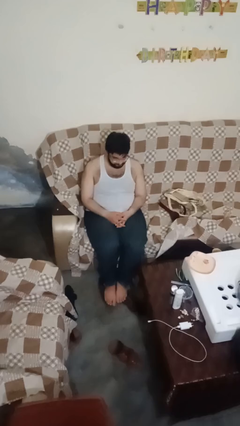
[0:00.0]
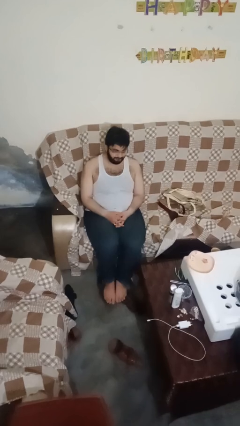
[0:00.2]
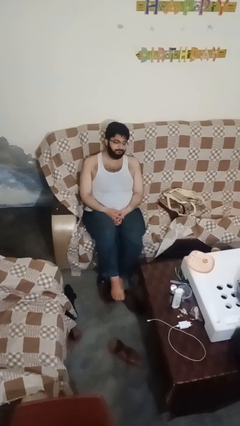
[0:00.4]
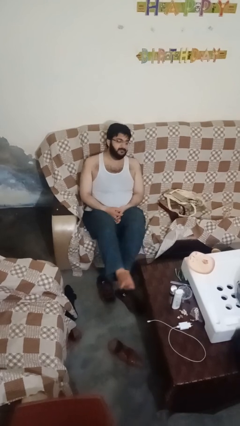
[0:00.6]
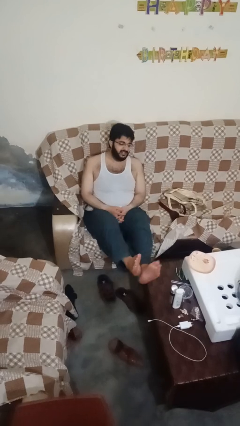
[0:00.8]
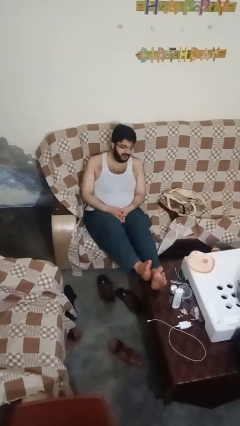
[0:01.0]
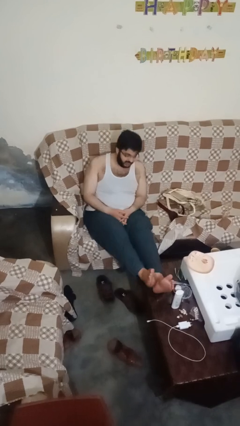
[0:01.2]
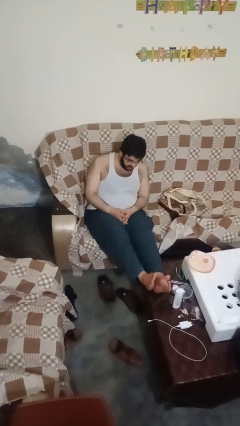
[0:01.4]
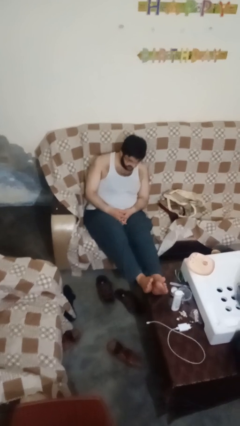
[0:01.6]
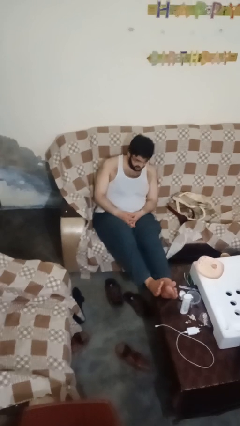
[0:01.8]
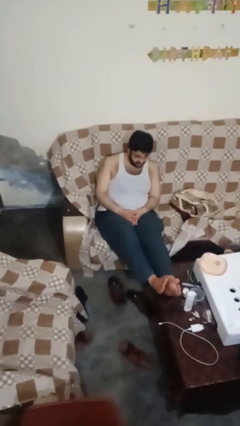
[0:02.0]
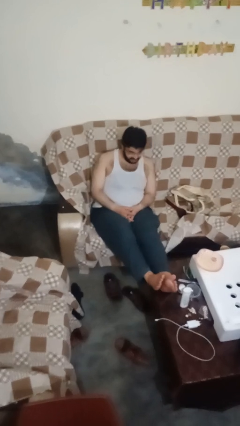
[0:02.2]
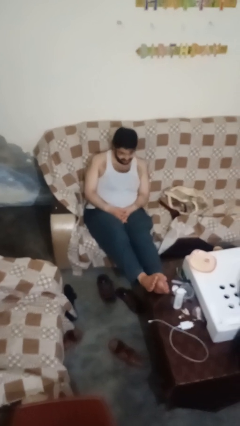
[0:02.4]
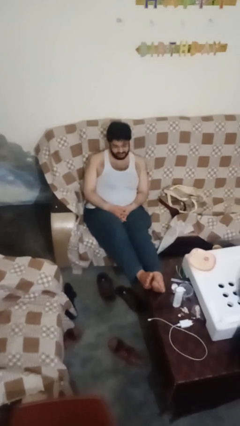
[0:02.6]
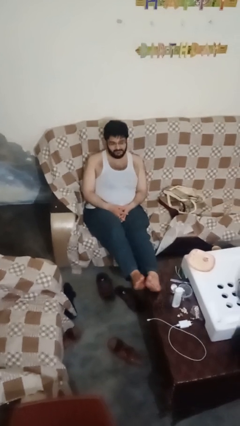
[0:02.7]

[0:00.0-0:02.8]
person puts feet up

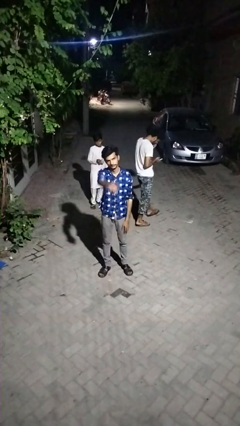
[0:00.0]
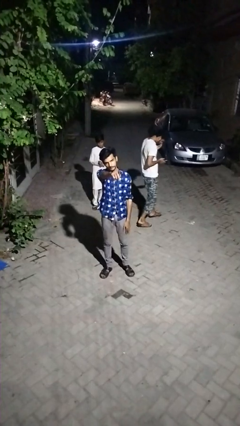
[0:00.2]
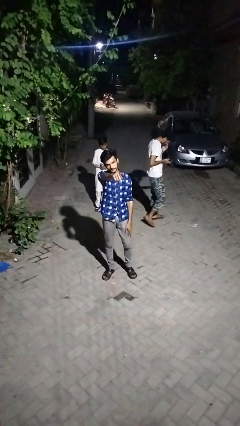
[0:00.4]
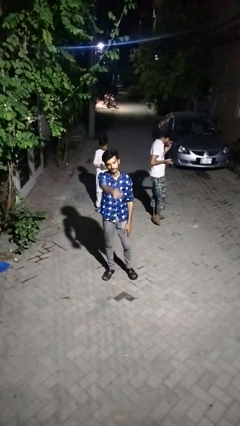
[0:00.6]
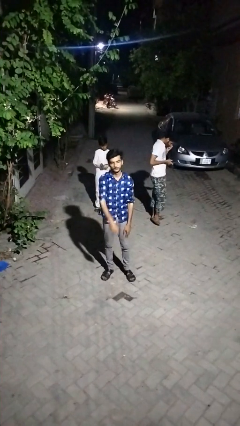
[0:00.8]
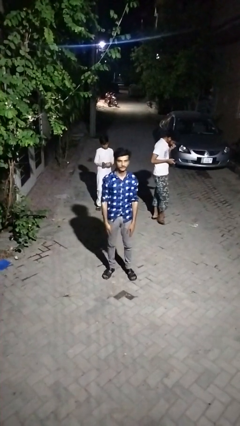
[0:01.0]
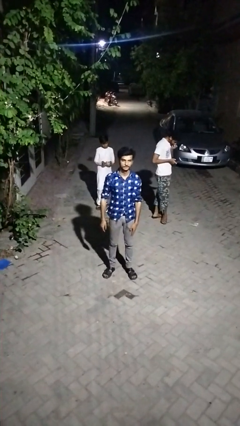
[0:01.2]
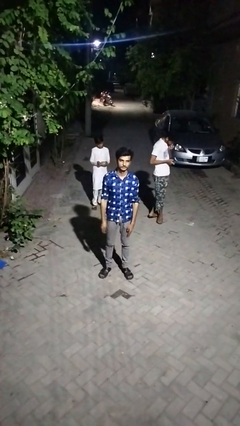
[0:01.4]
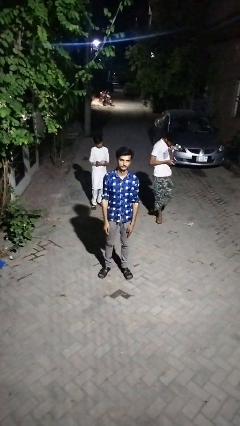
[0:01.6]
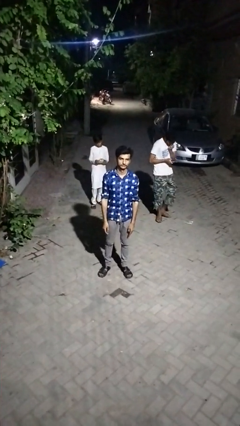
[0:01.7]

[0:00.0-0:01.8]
person points at person

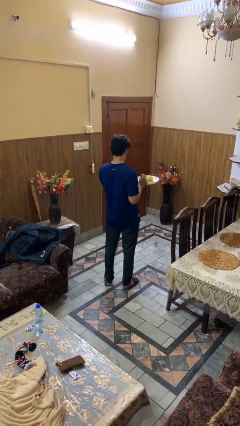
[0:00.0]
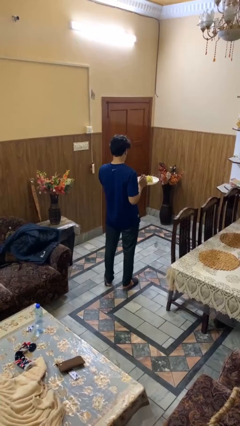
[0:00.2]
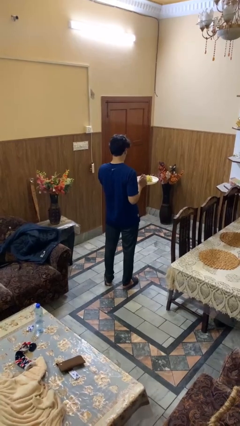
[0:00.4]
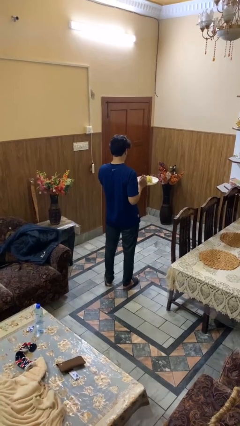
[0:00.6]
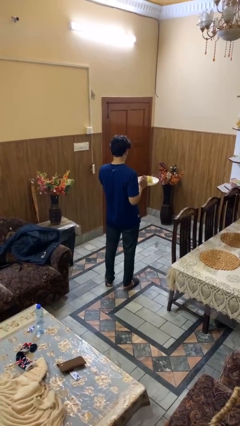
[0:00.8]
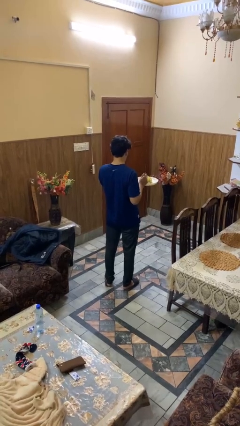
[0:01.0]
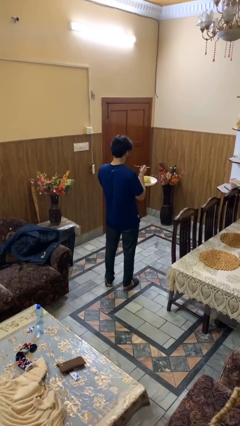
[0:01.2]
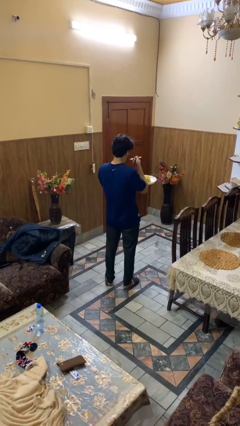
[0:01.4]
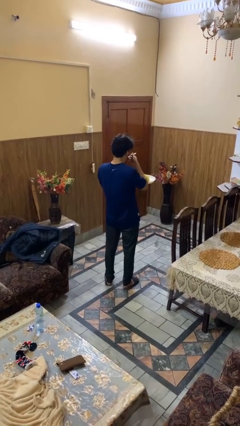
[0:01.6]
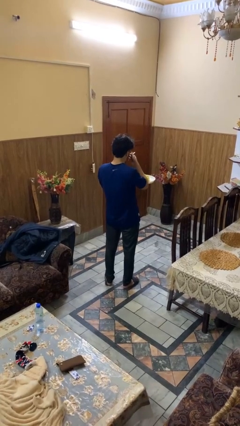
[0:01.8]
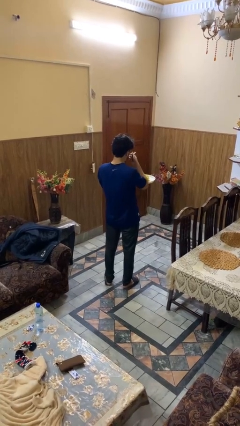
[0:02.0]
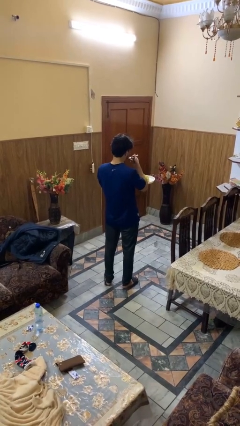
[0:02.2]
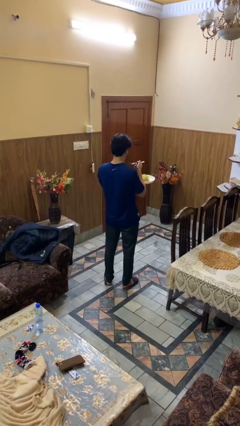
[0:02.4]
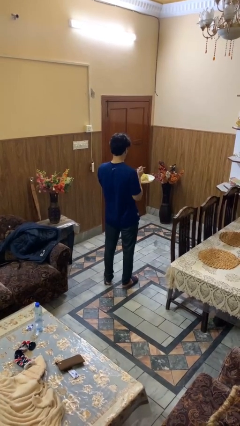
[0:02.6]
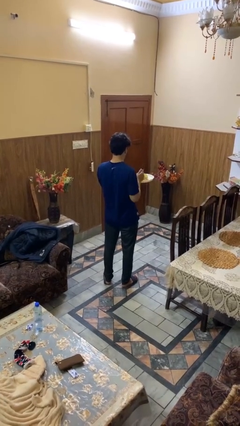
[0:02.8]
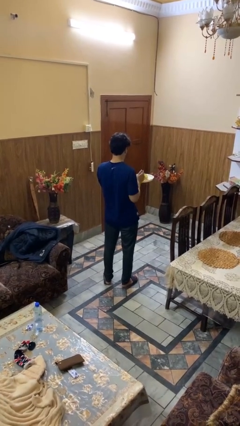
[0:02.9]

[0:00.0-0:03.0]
person eats with utensil

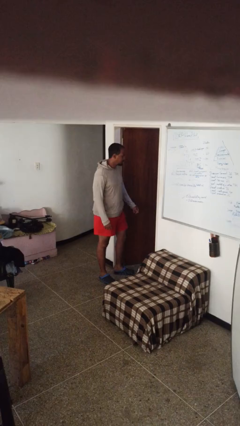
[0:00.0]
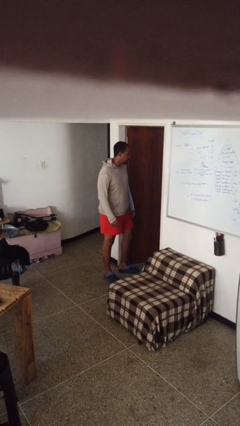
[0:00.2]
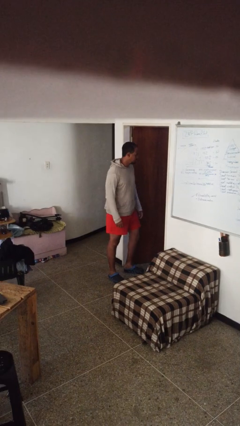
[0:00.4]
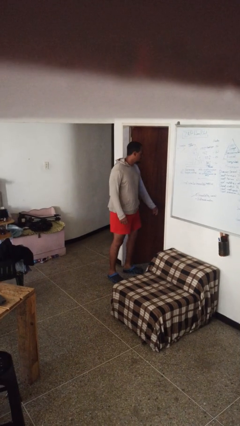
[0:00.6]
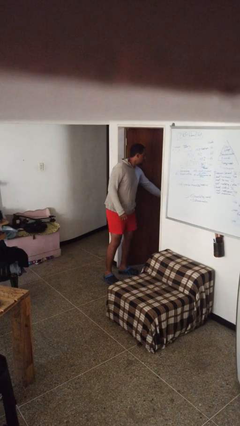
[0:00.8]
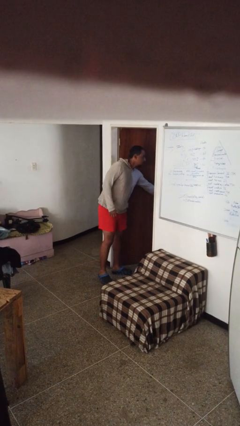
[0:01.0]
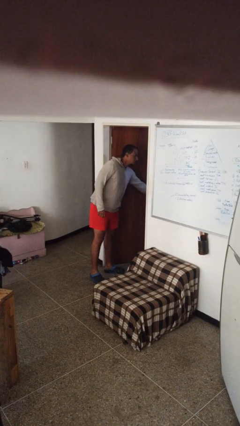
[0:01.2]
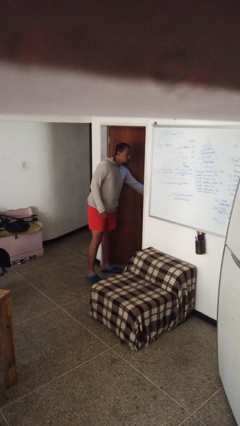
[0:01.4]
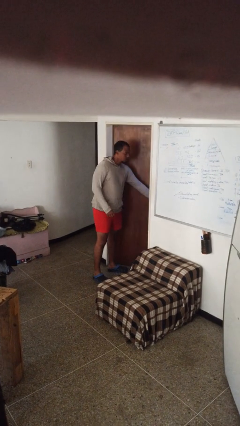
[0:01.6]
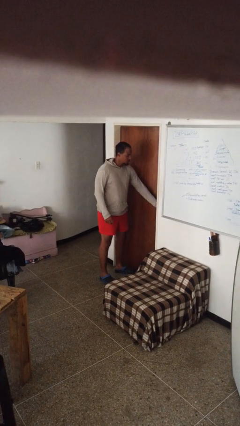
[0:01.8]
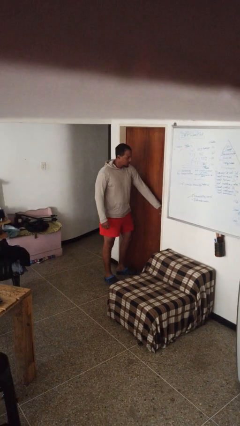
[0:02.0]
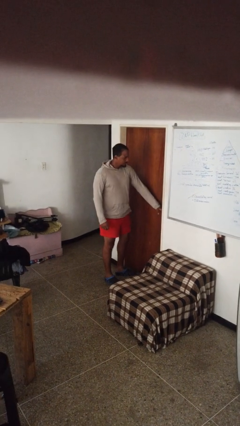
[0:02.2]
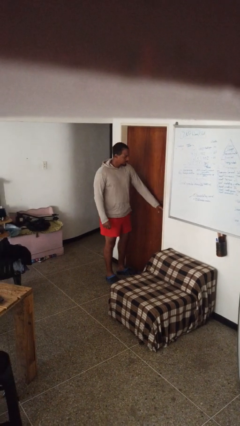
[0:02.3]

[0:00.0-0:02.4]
person closes facility door

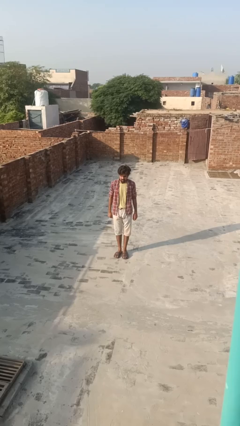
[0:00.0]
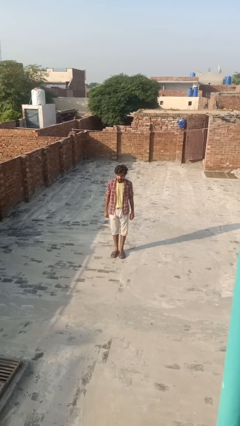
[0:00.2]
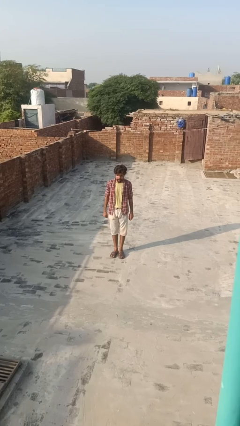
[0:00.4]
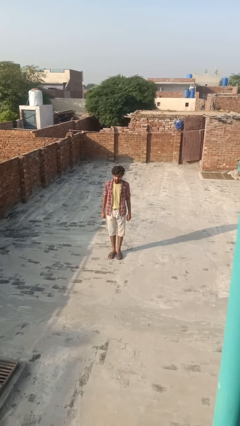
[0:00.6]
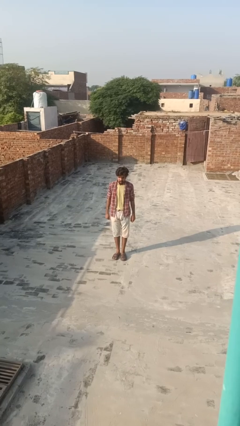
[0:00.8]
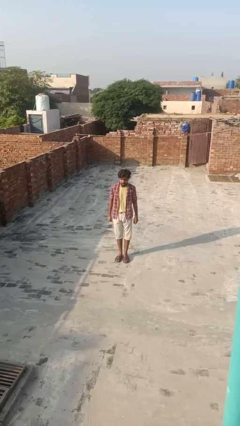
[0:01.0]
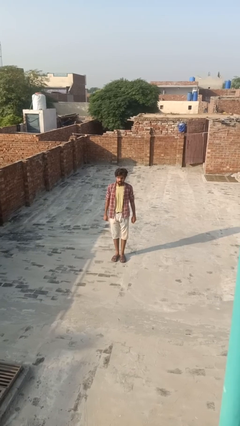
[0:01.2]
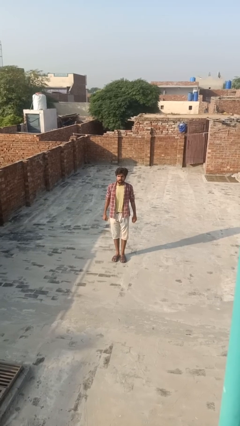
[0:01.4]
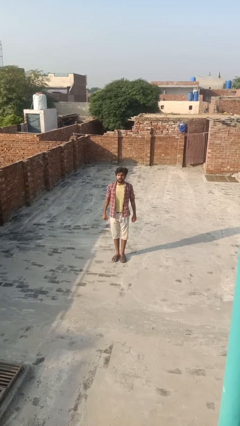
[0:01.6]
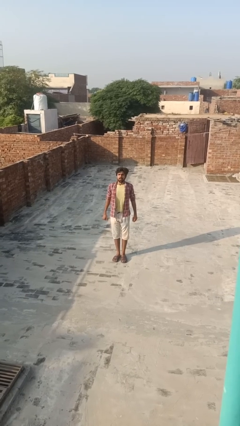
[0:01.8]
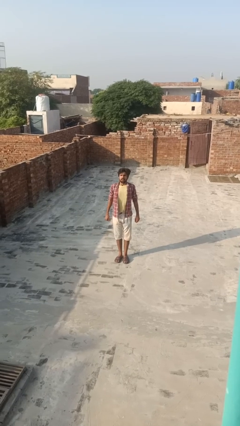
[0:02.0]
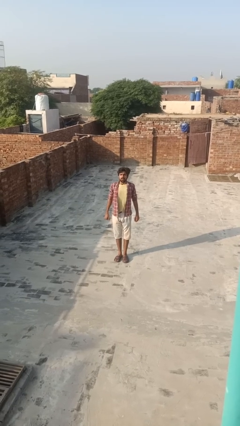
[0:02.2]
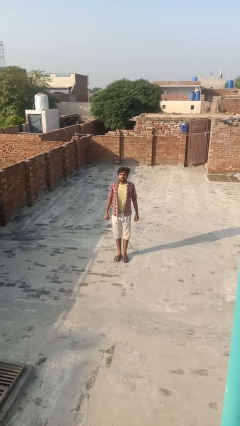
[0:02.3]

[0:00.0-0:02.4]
person exercises with lunges

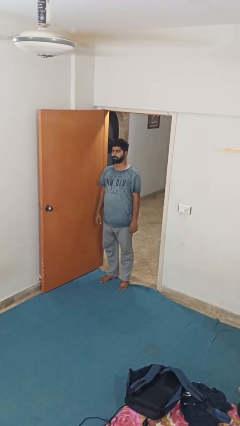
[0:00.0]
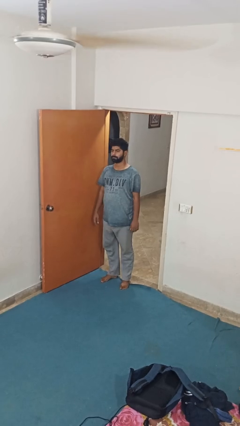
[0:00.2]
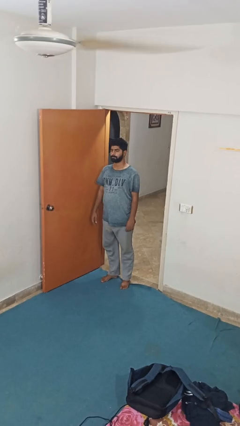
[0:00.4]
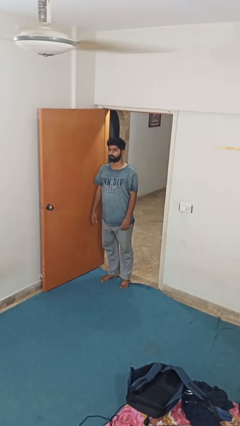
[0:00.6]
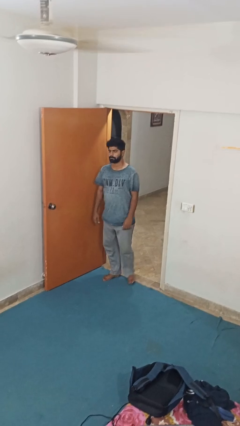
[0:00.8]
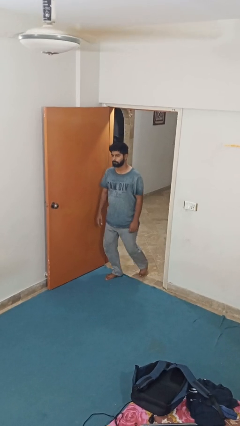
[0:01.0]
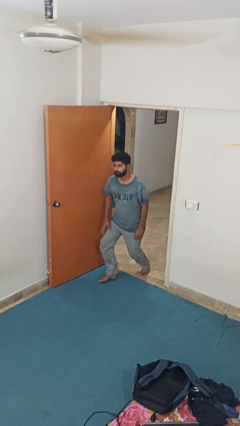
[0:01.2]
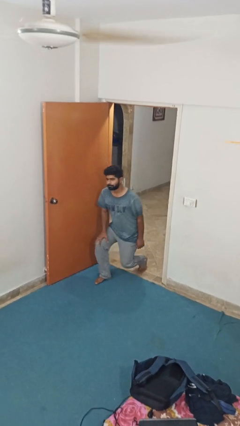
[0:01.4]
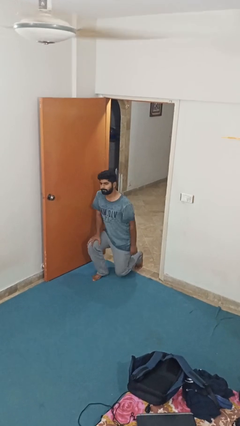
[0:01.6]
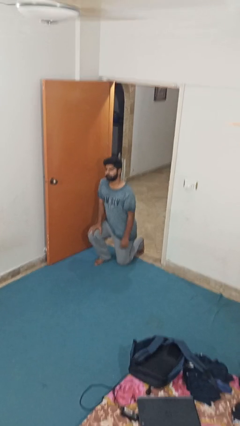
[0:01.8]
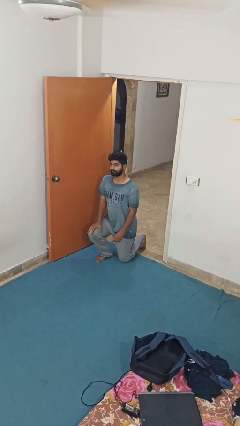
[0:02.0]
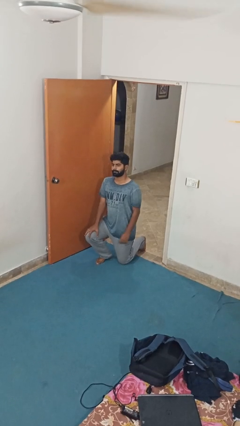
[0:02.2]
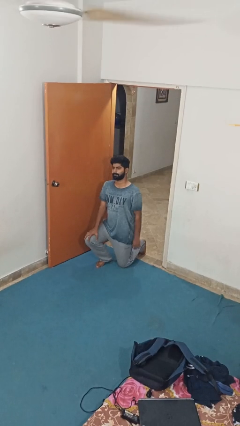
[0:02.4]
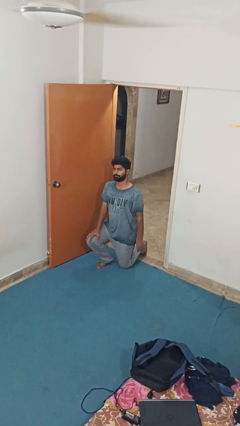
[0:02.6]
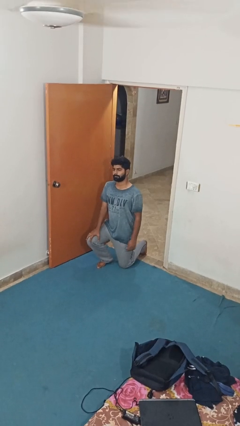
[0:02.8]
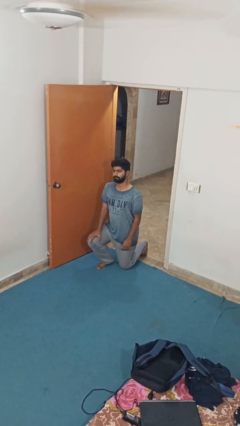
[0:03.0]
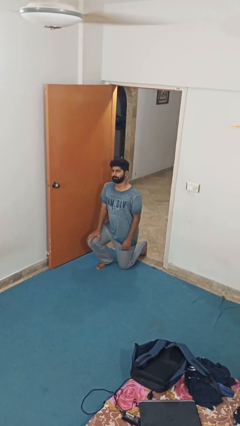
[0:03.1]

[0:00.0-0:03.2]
person kneels

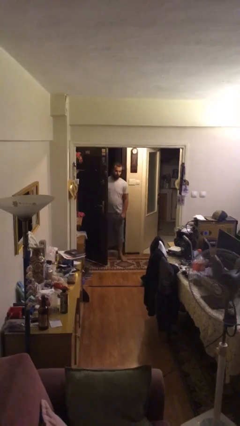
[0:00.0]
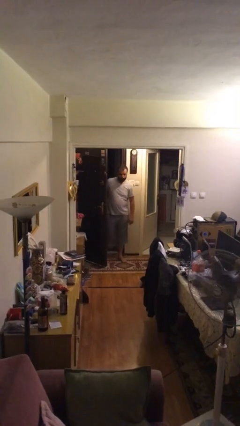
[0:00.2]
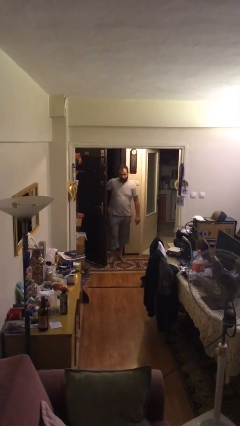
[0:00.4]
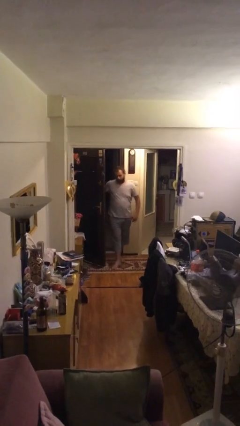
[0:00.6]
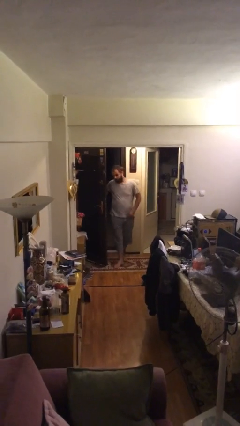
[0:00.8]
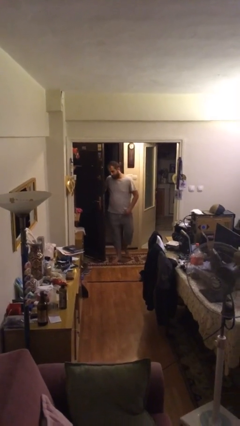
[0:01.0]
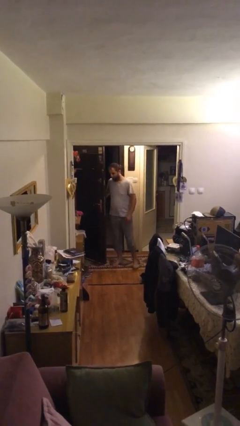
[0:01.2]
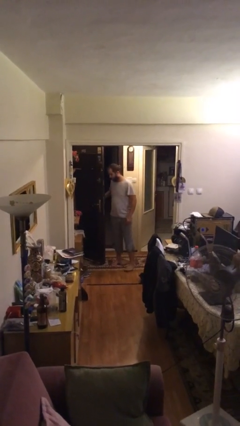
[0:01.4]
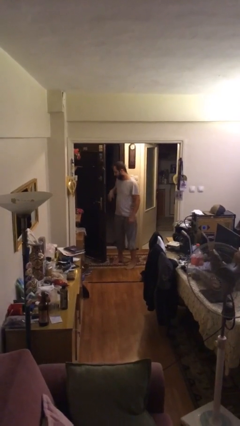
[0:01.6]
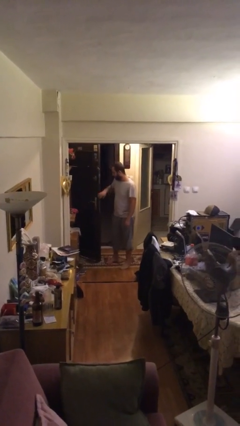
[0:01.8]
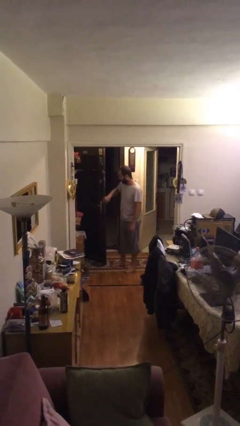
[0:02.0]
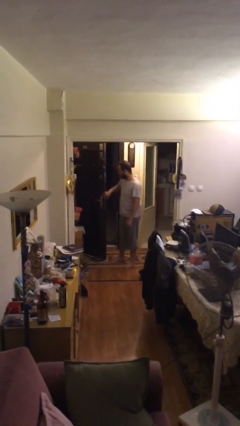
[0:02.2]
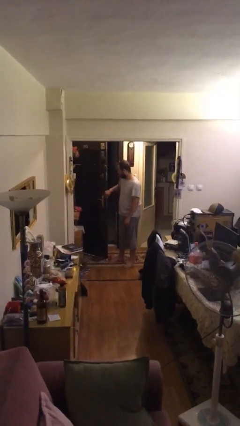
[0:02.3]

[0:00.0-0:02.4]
person enters scene through structure
